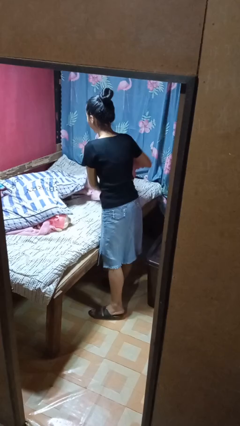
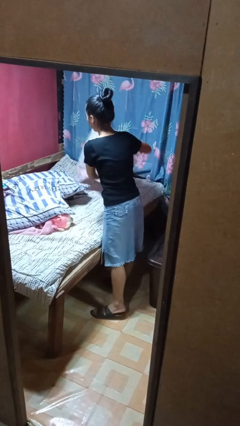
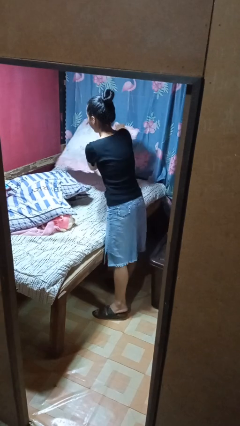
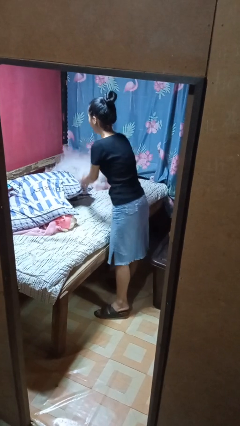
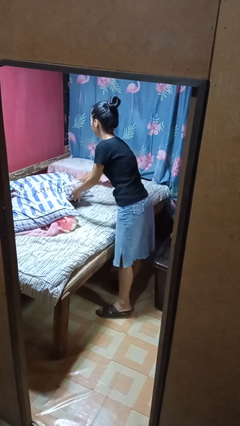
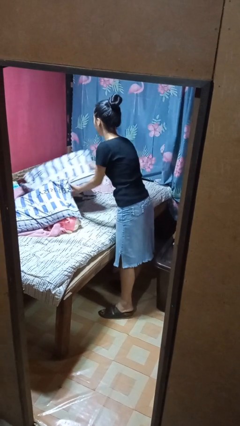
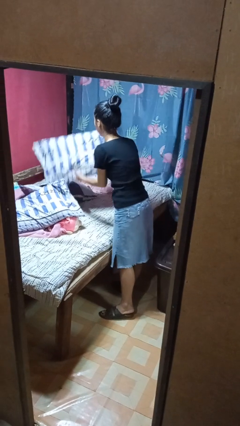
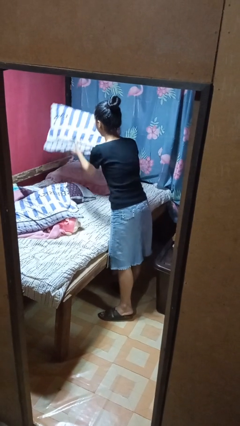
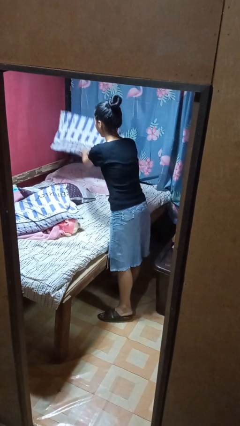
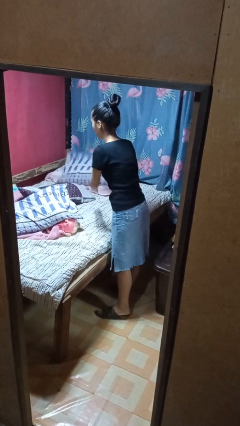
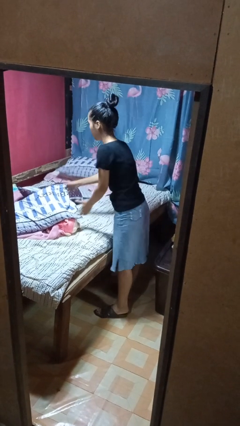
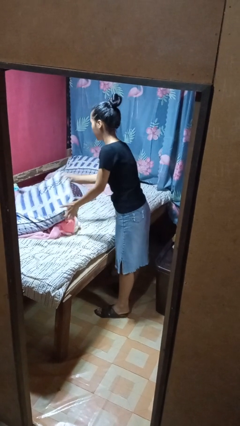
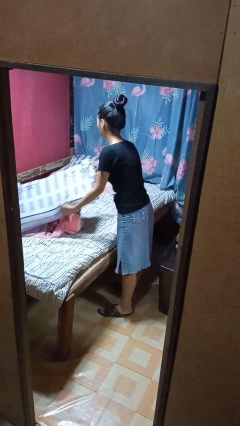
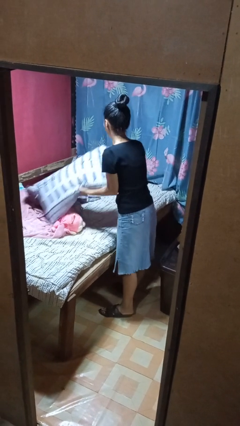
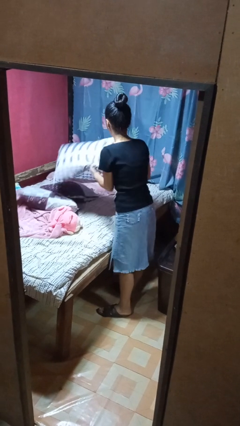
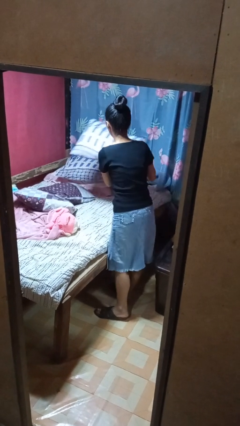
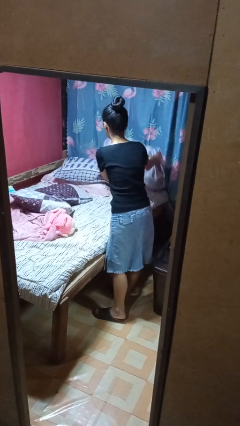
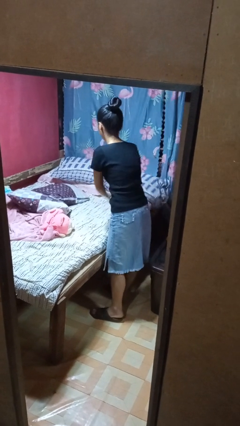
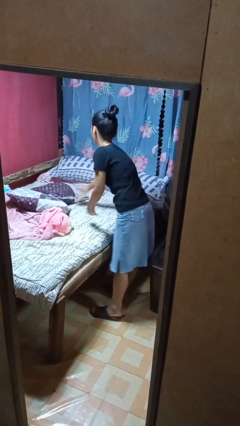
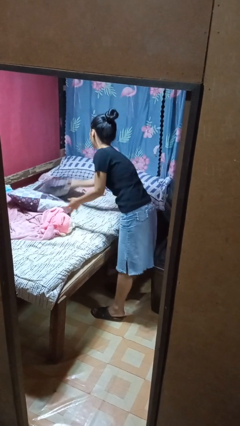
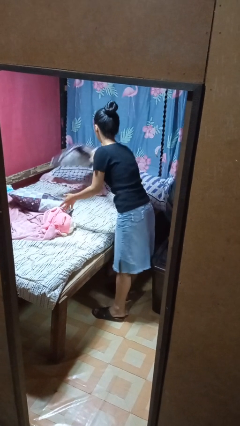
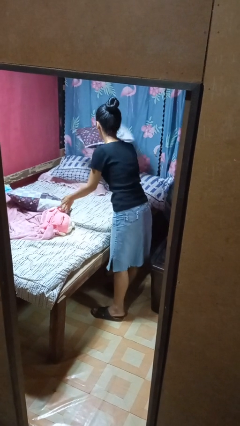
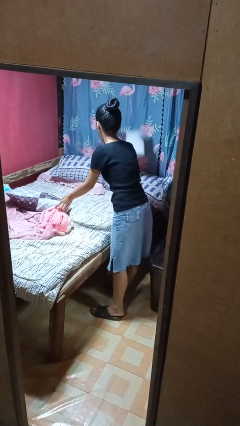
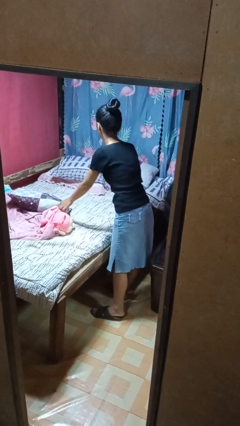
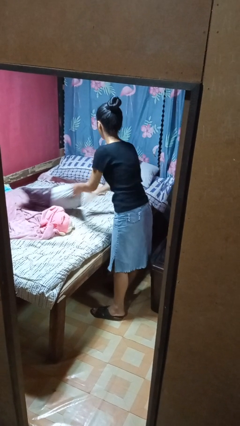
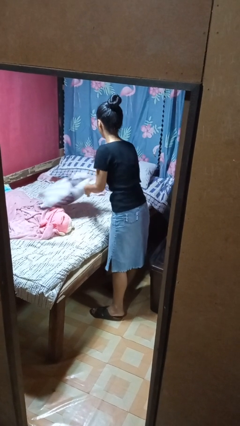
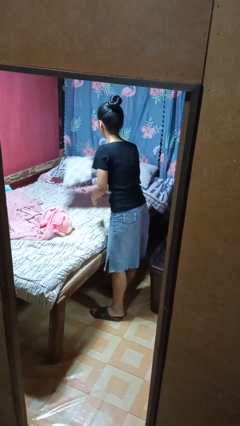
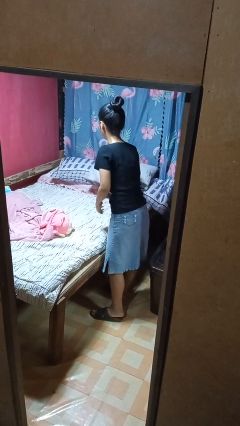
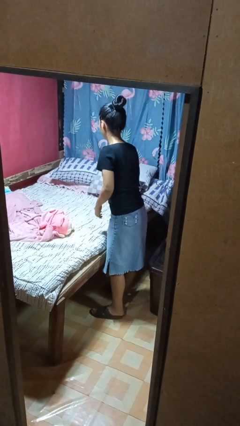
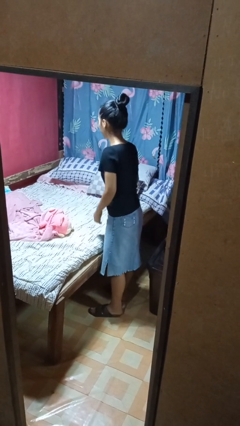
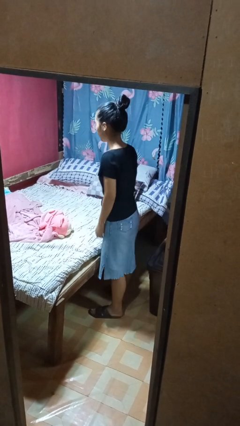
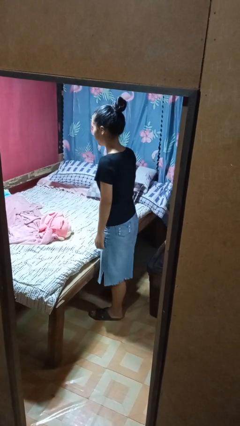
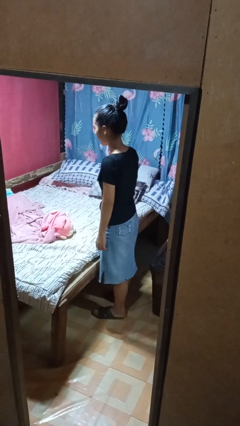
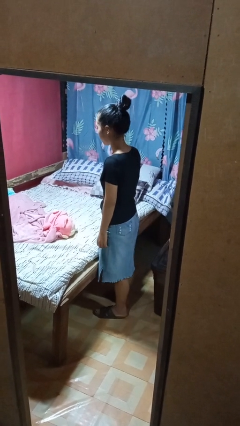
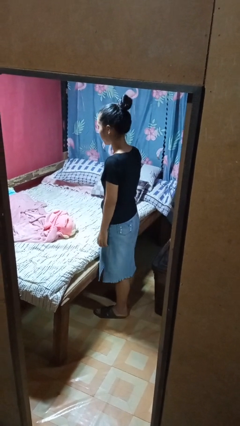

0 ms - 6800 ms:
person makes bed

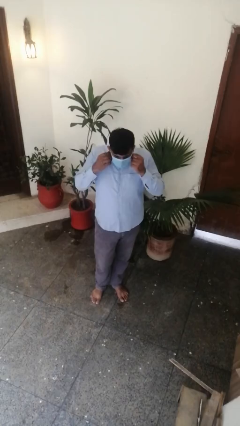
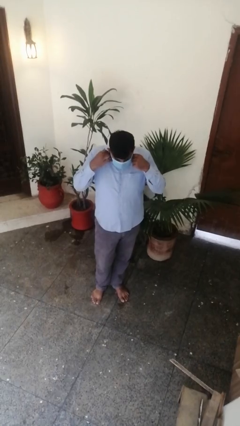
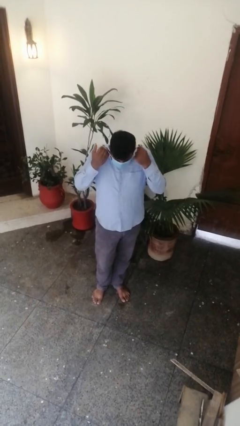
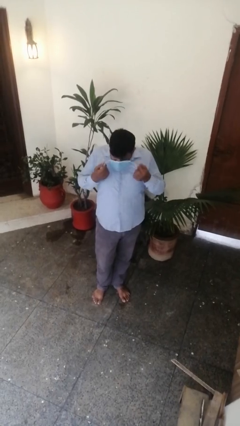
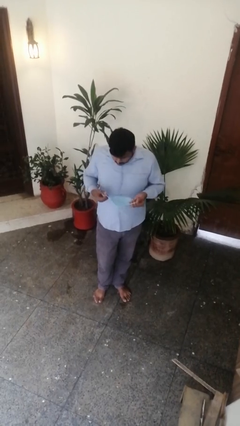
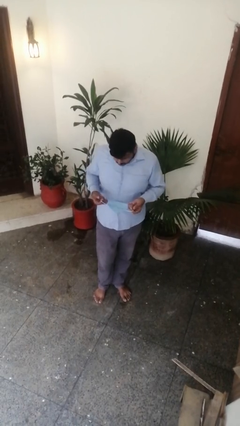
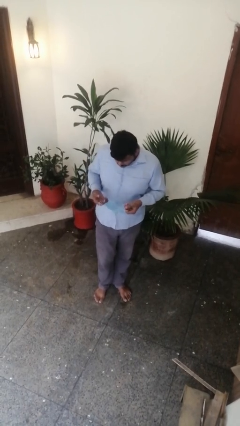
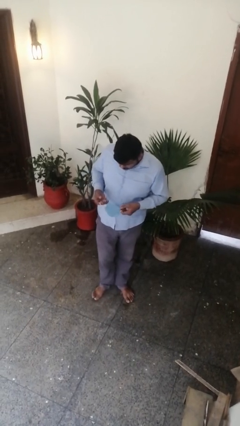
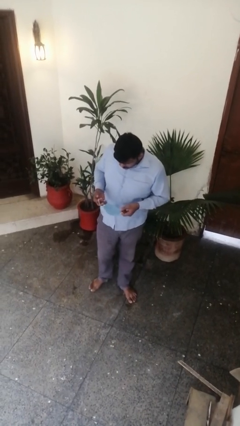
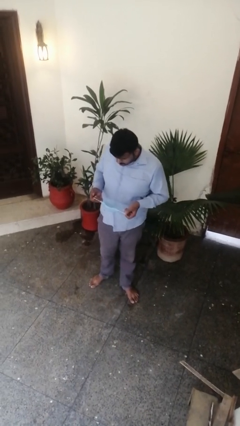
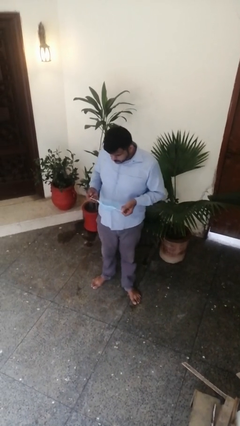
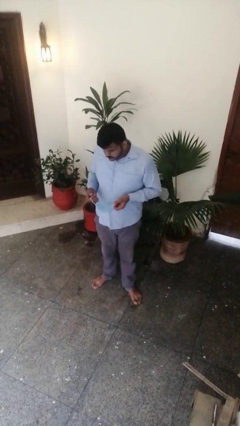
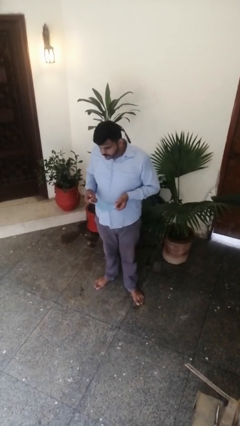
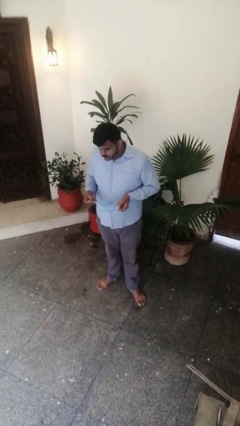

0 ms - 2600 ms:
person takes off facemask

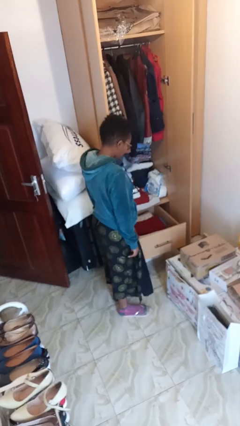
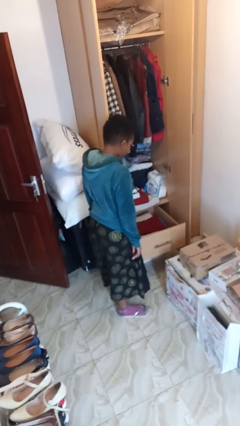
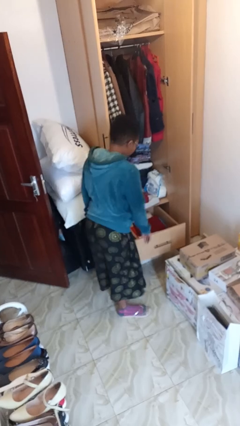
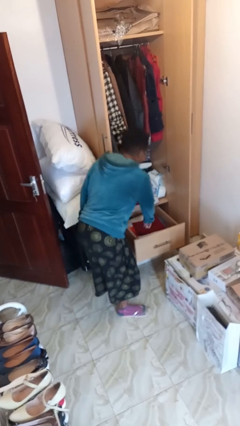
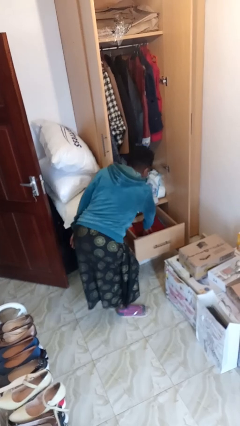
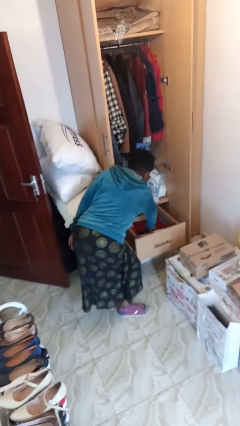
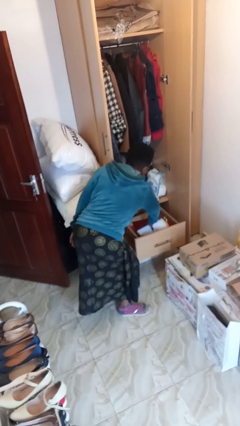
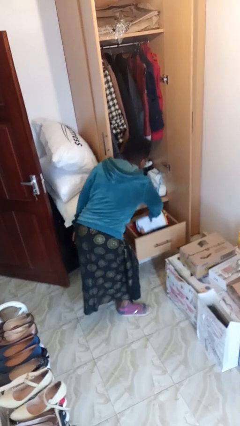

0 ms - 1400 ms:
person takes clothes from dresser

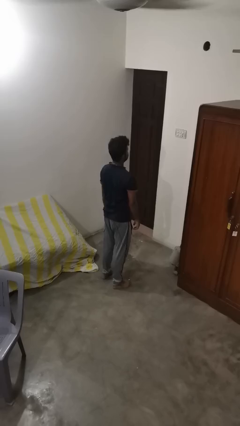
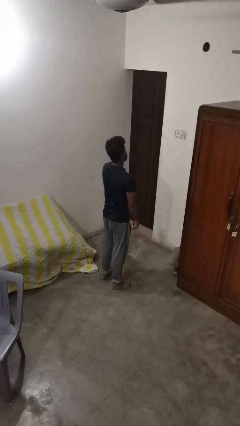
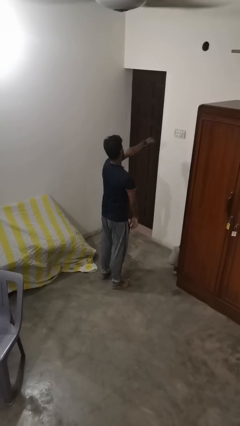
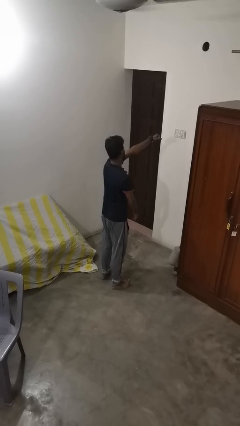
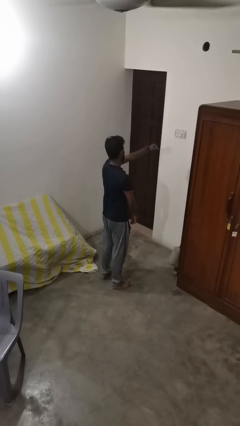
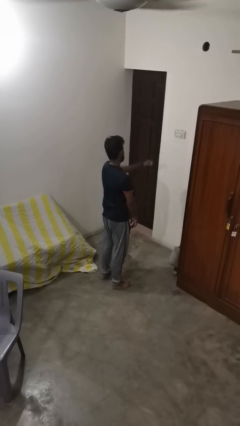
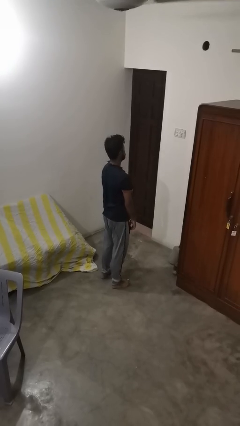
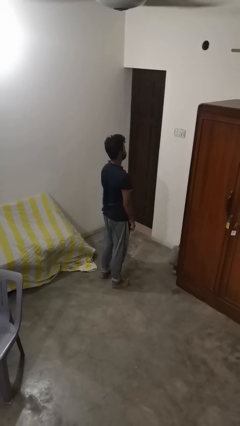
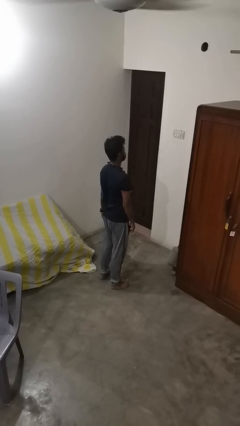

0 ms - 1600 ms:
person punches

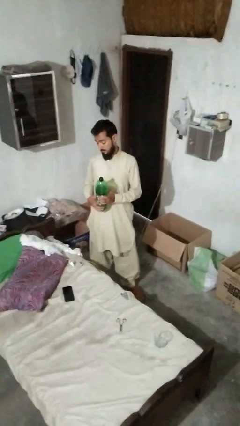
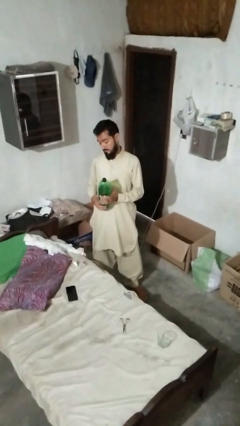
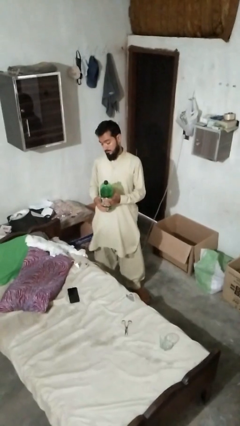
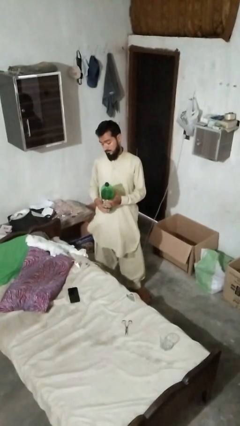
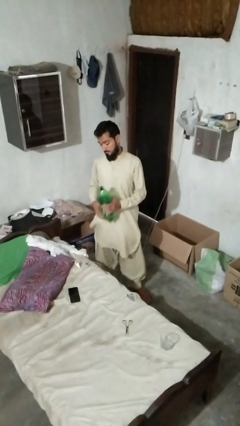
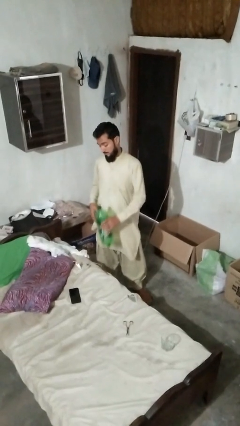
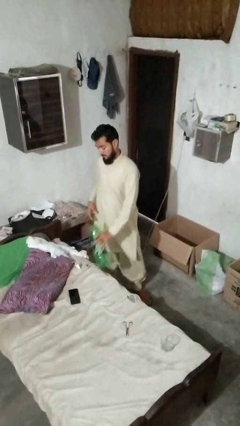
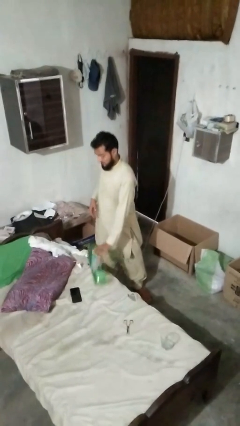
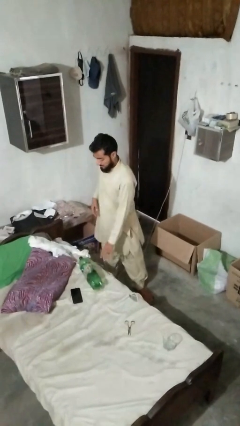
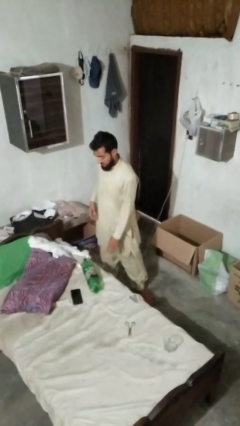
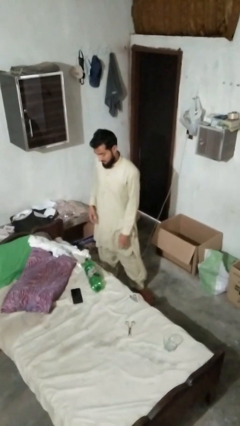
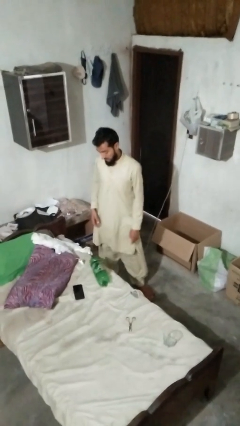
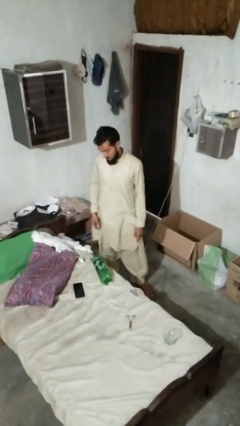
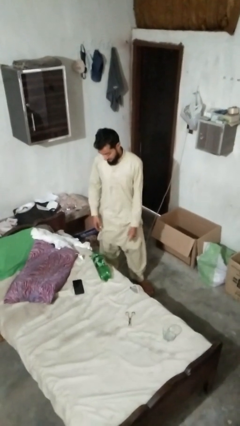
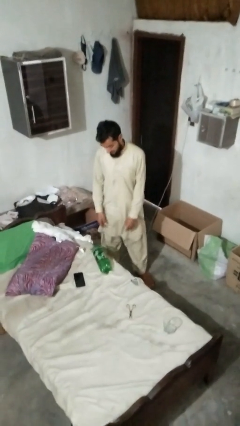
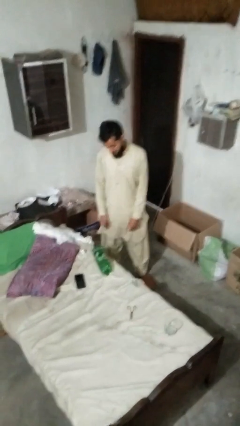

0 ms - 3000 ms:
person puts down object on bed

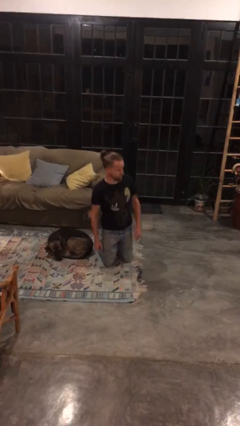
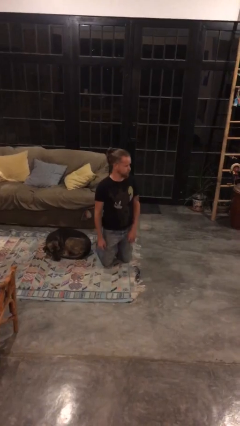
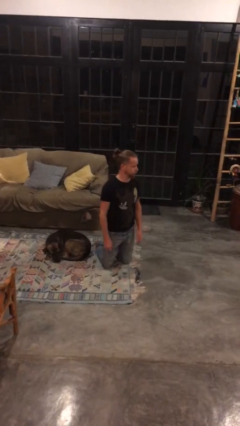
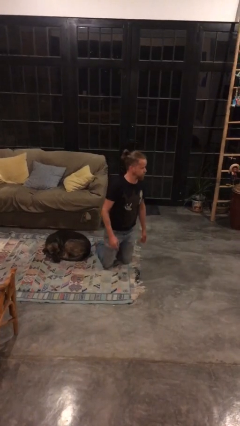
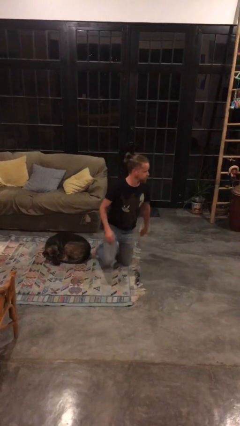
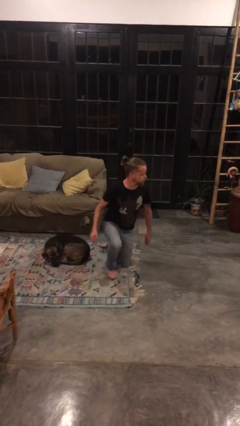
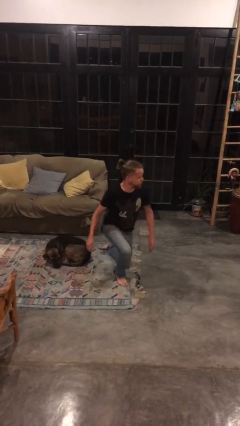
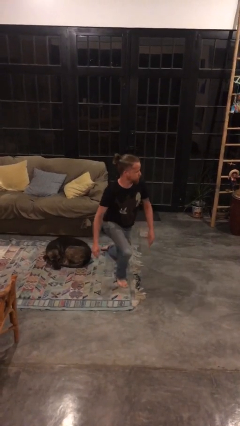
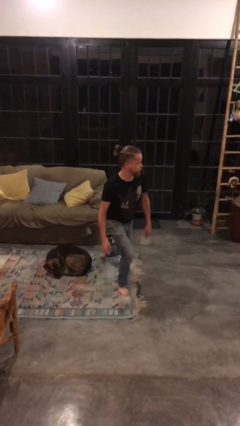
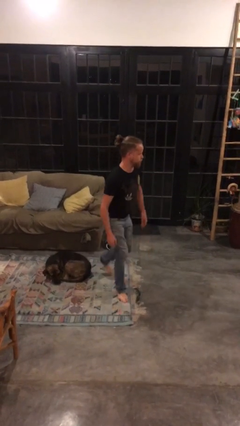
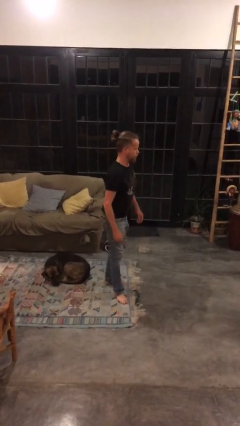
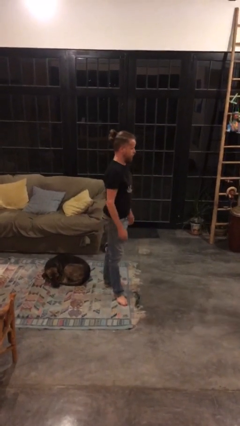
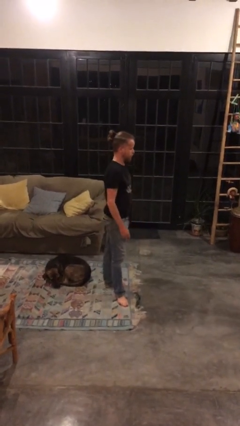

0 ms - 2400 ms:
person stands up from floor
